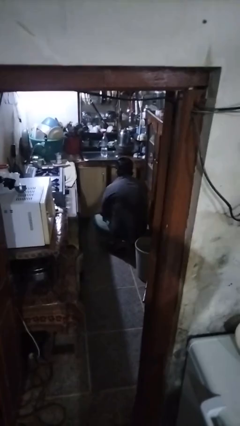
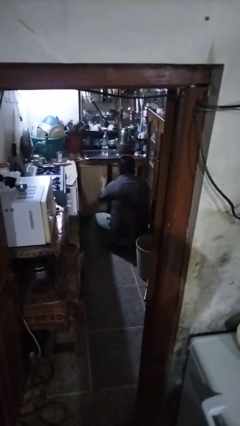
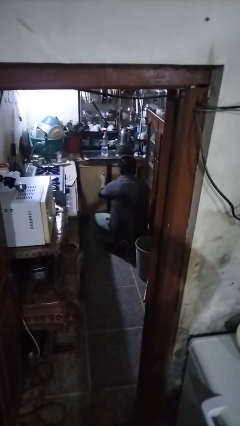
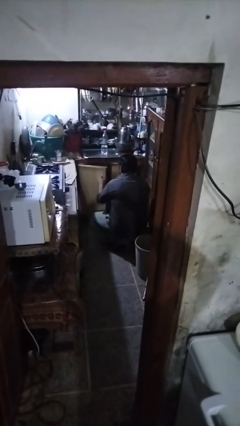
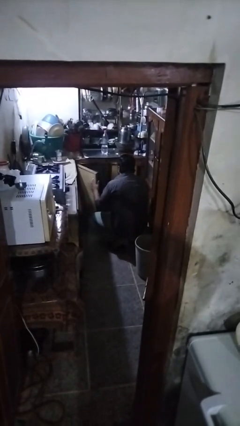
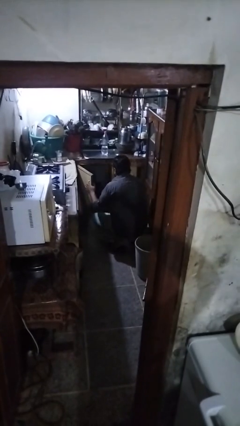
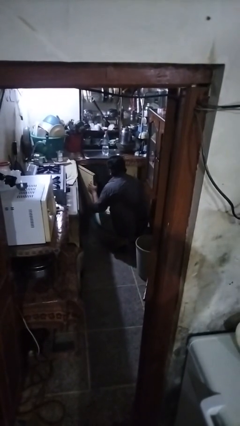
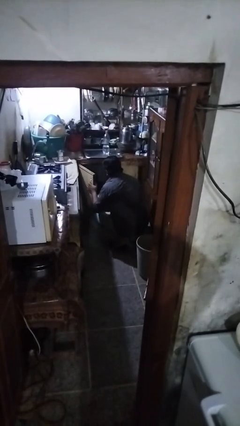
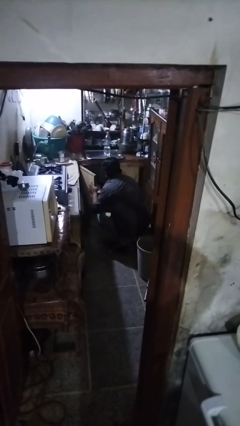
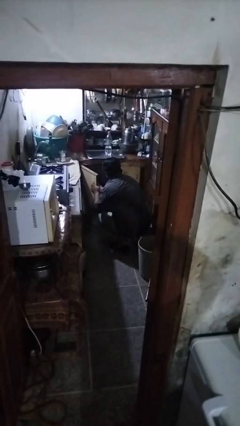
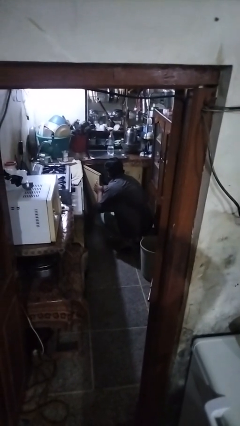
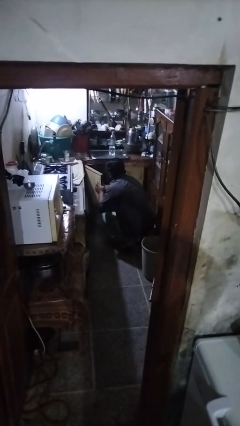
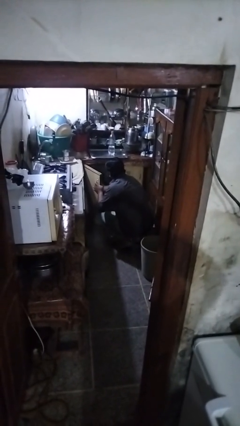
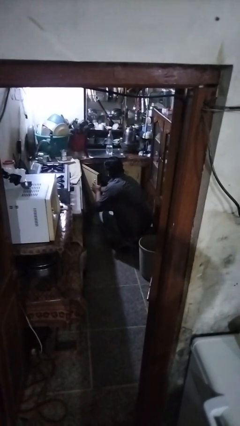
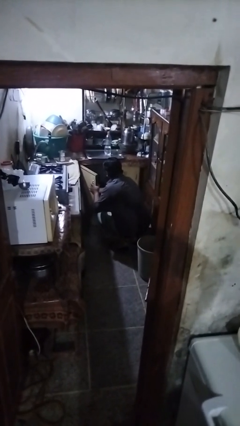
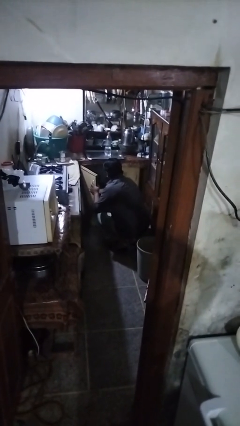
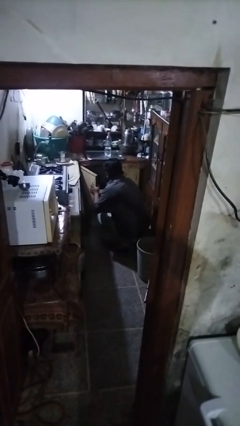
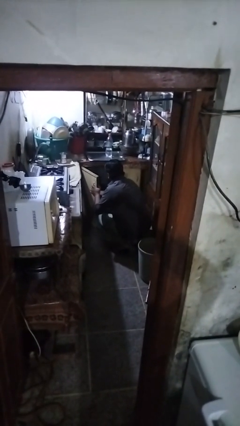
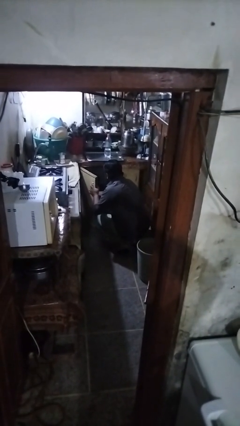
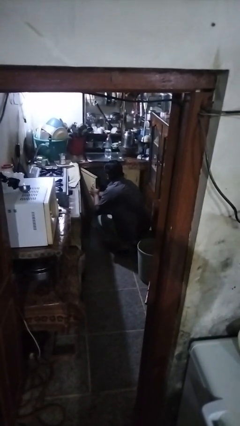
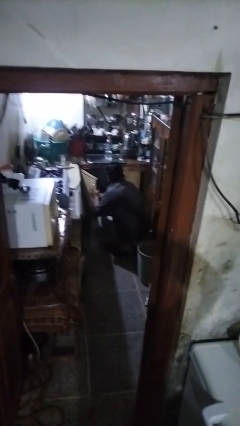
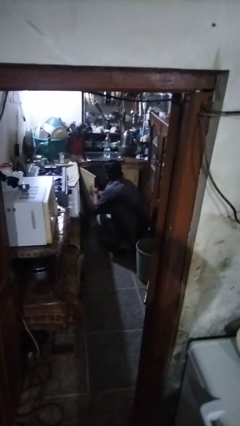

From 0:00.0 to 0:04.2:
person puts object in cabinet

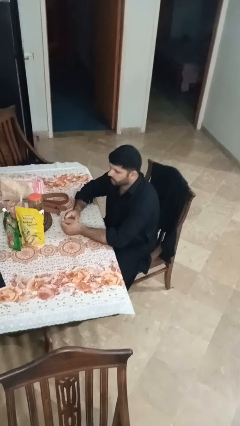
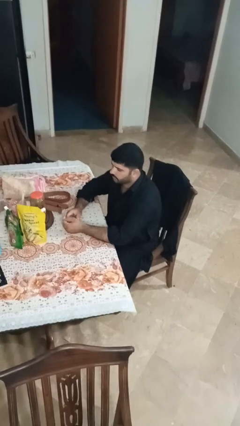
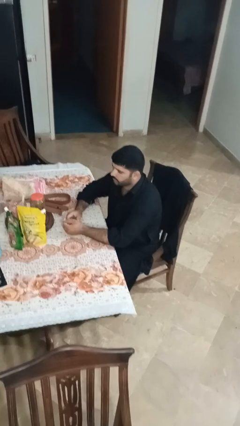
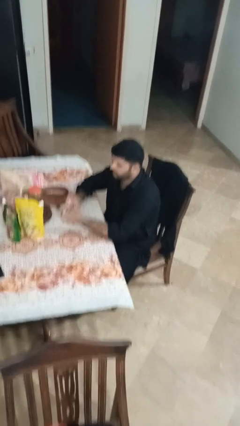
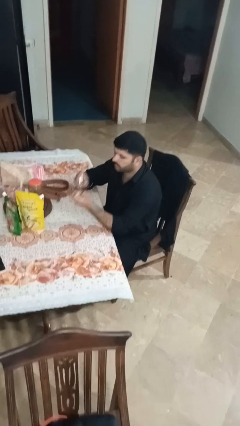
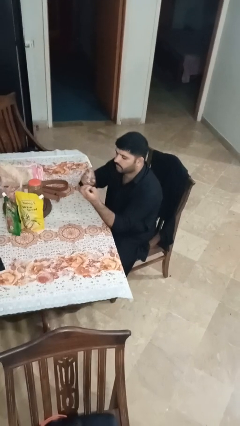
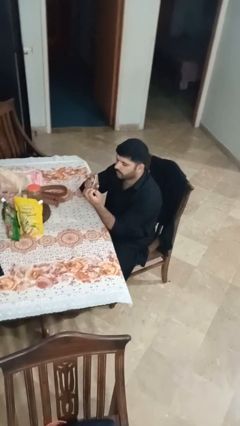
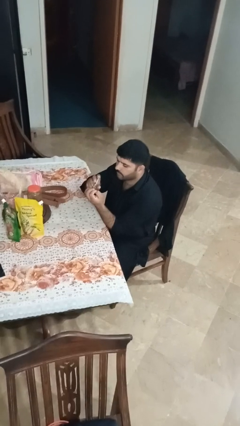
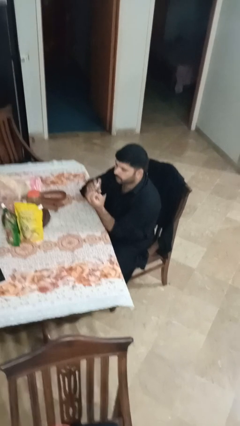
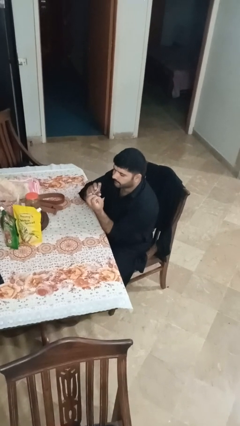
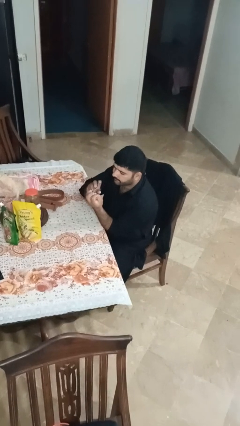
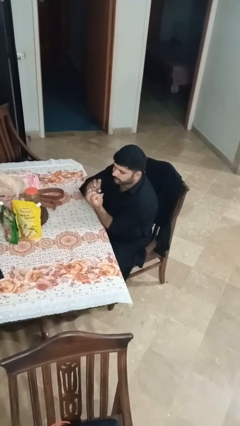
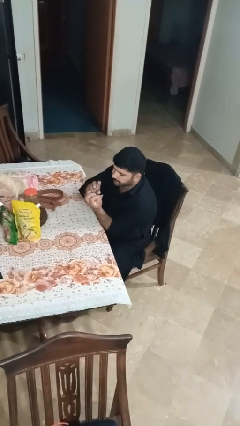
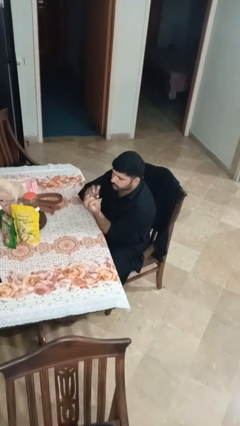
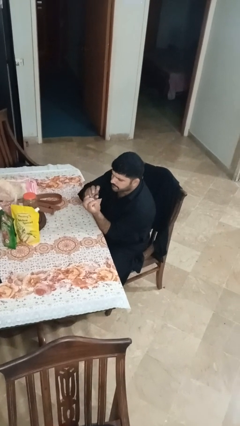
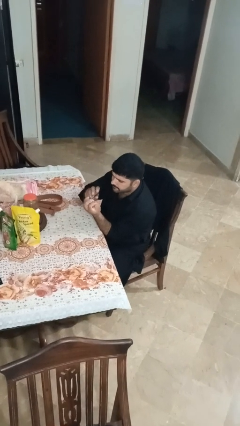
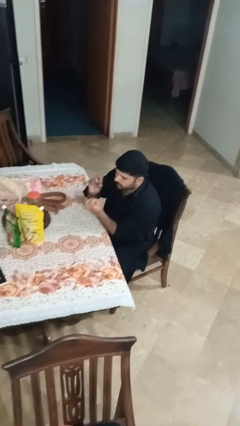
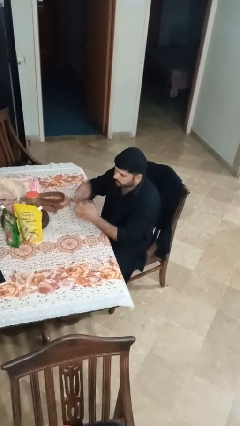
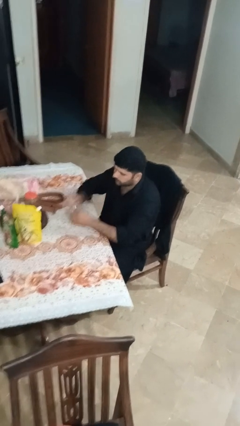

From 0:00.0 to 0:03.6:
person clips fingernails

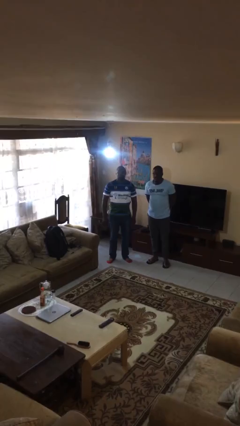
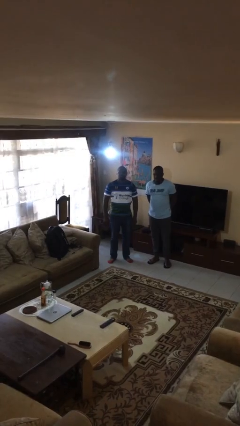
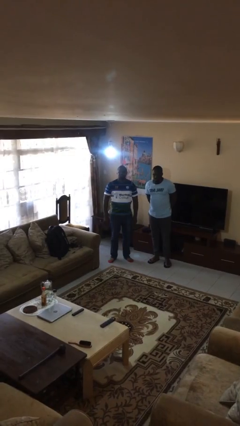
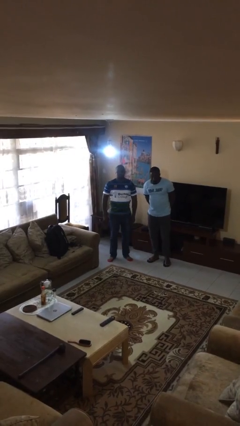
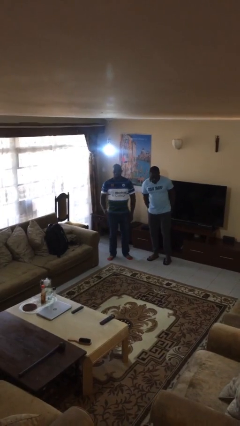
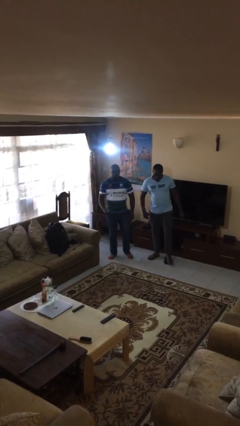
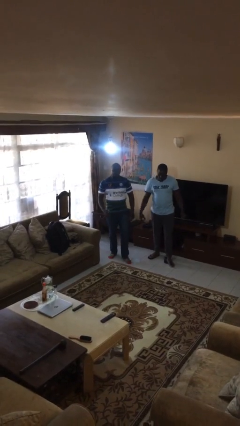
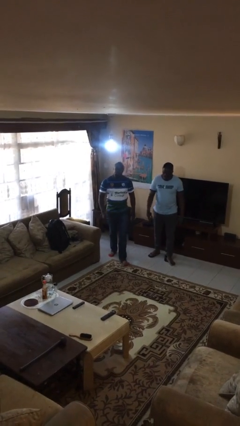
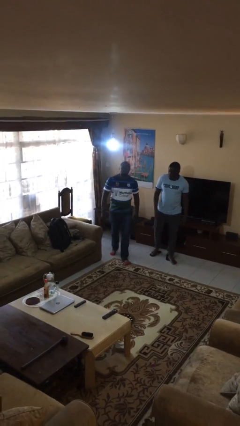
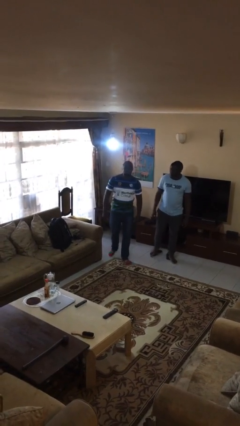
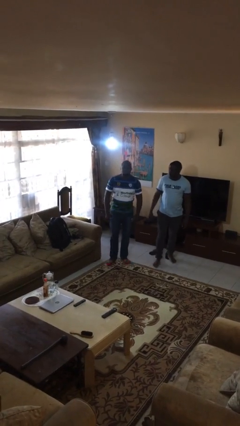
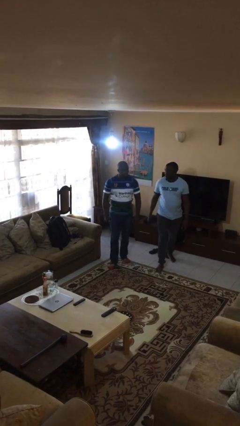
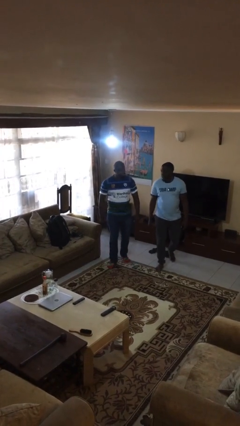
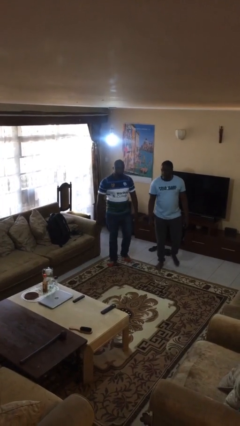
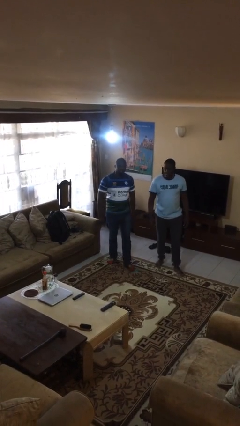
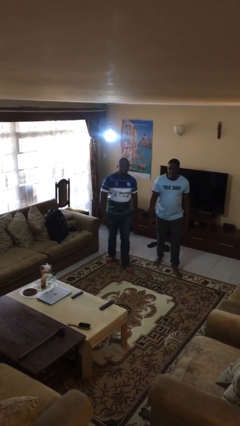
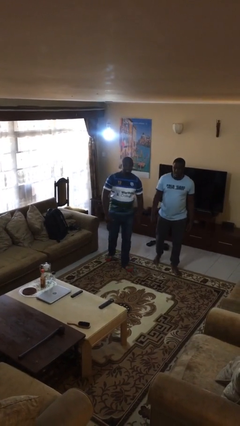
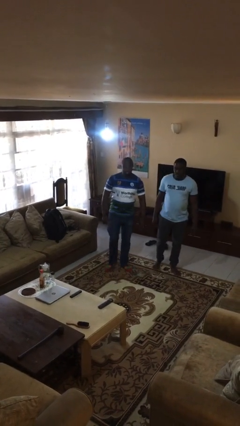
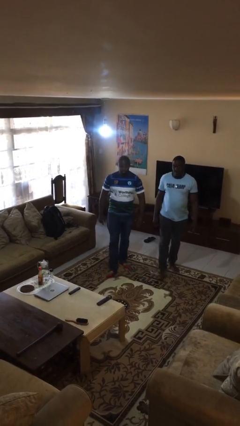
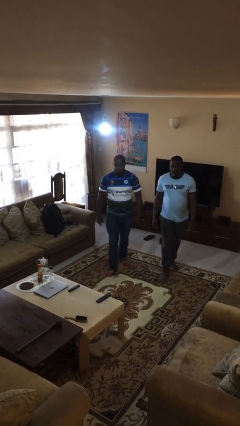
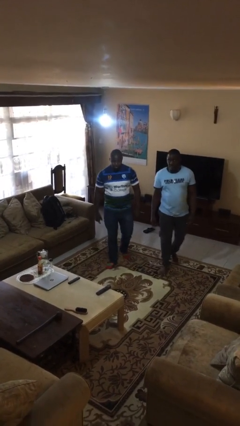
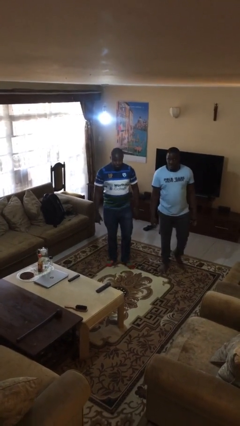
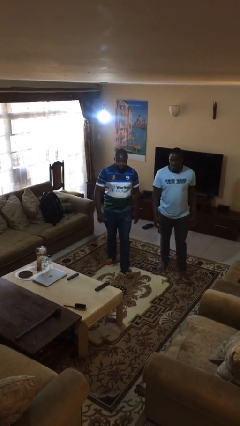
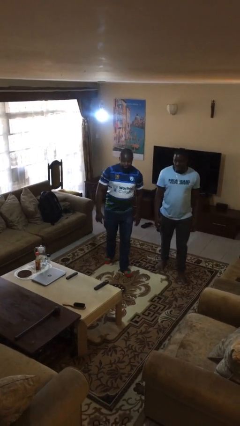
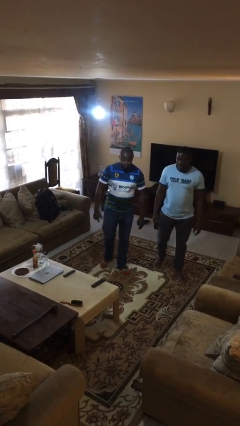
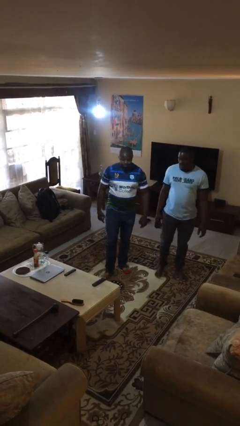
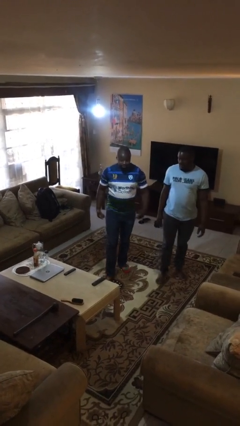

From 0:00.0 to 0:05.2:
person talks to person

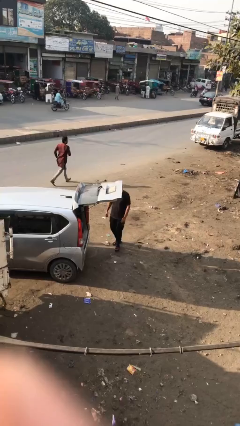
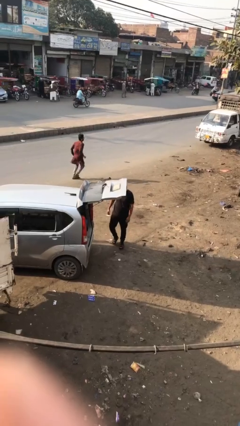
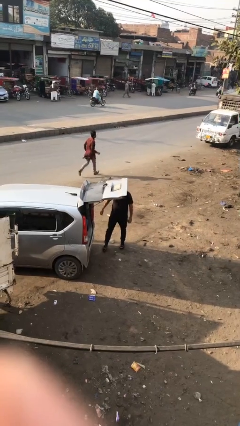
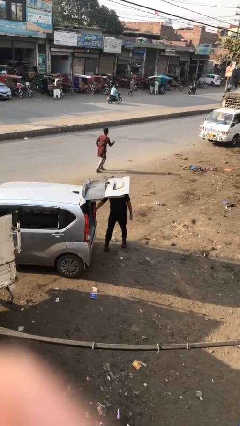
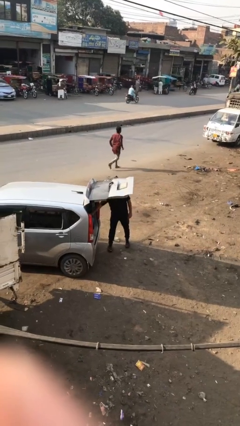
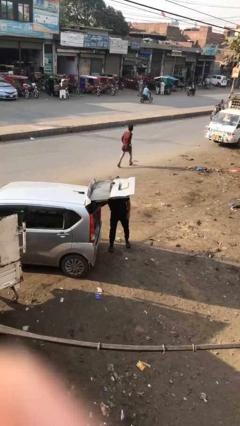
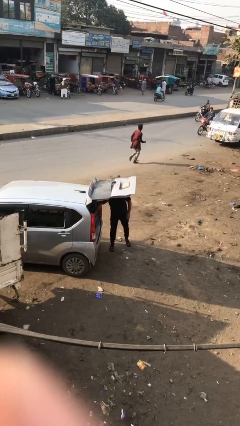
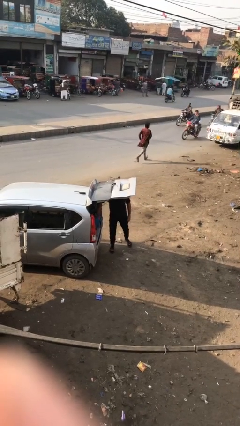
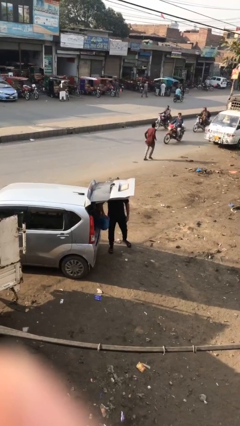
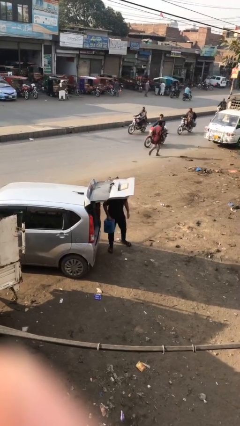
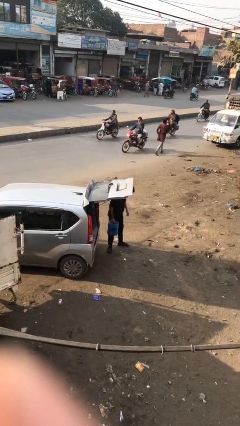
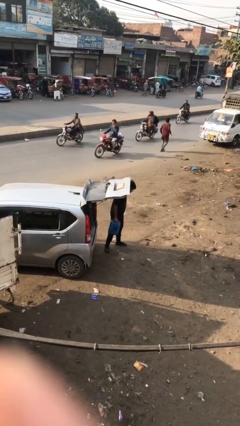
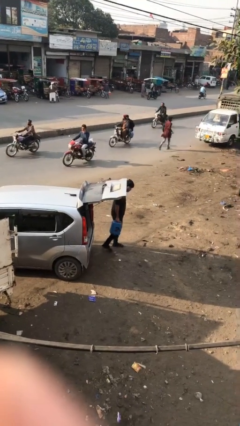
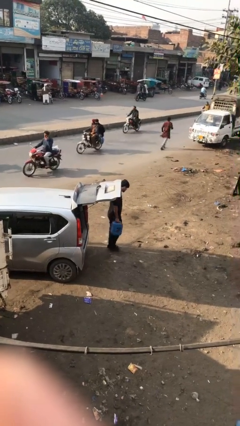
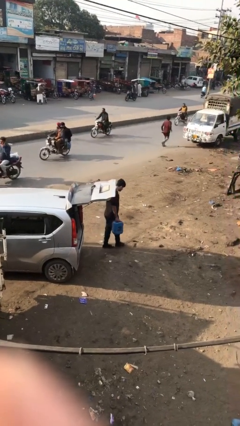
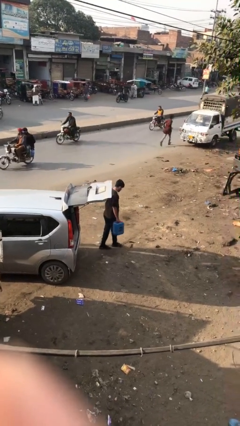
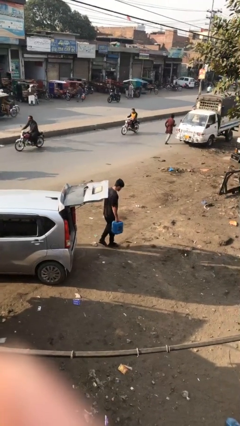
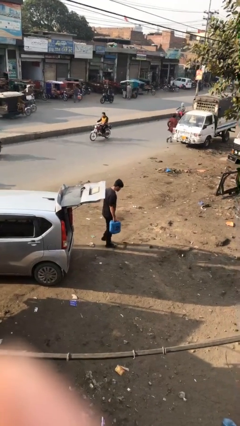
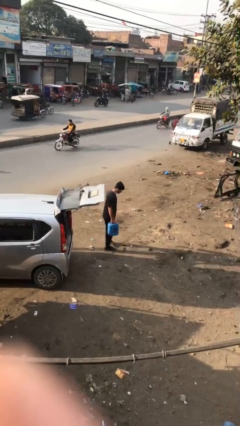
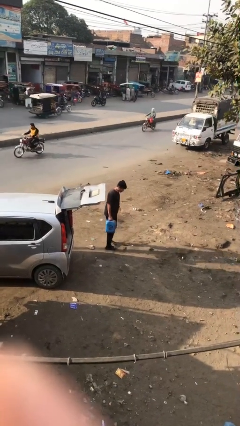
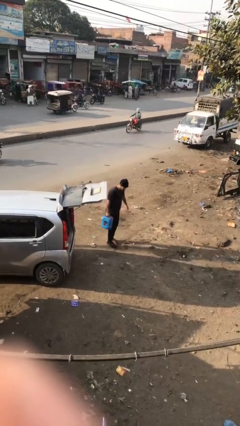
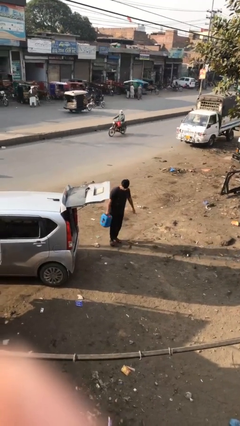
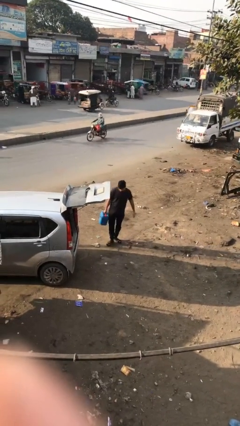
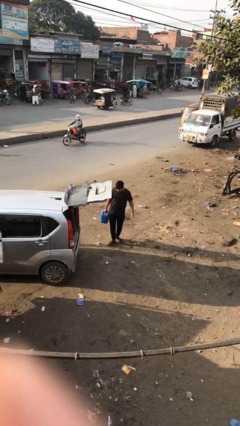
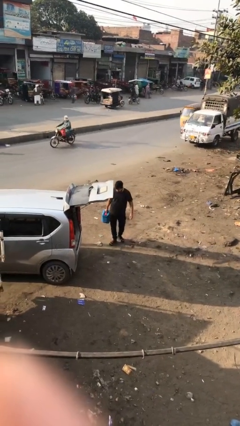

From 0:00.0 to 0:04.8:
person unloads car

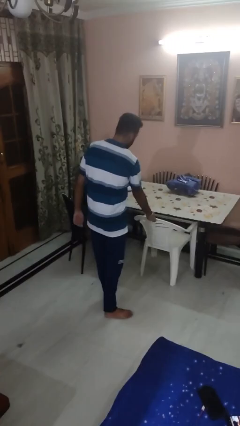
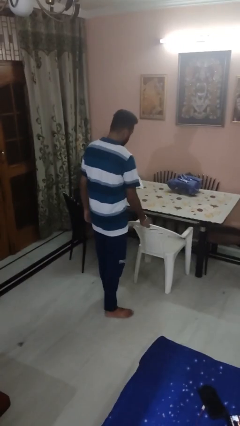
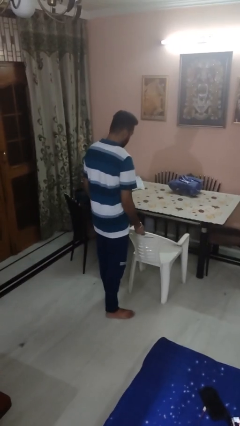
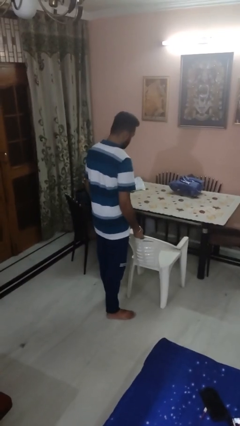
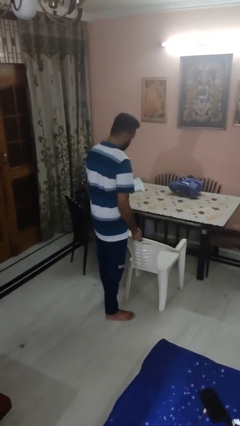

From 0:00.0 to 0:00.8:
person pulls out chair
